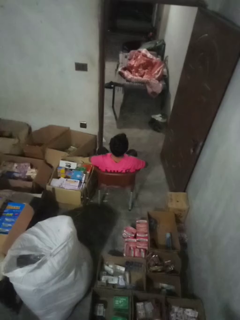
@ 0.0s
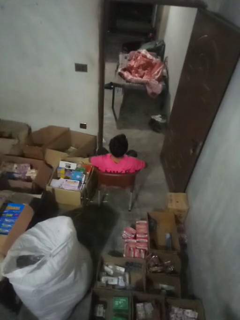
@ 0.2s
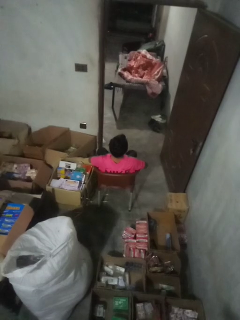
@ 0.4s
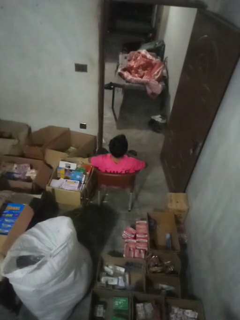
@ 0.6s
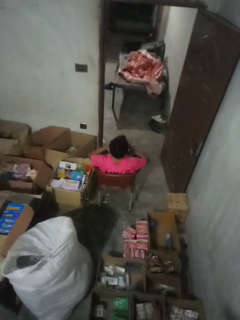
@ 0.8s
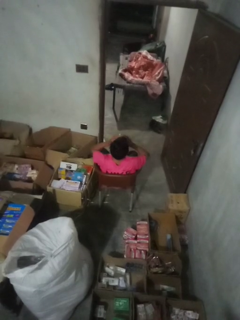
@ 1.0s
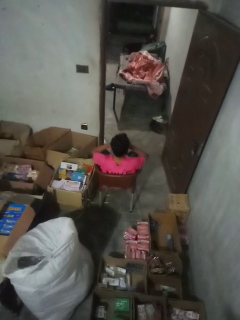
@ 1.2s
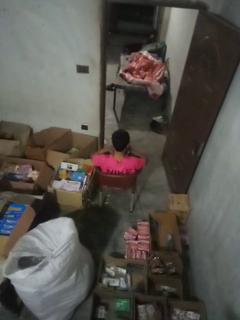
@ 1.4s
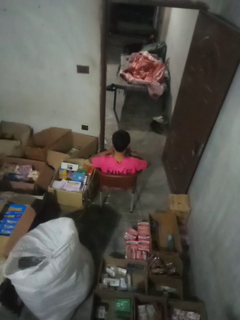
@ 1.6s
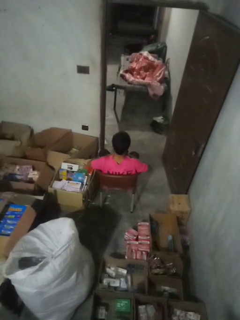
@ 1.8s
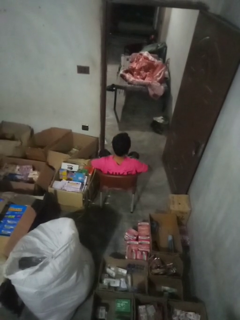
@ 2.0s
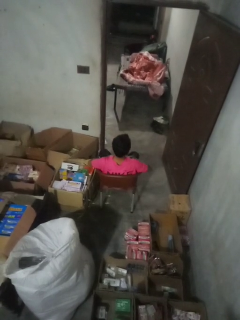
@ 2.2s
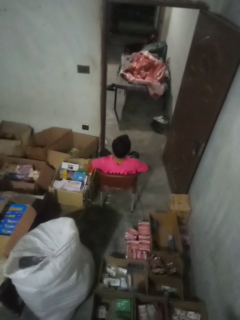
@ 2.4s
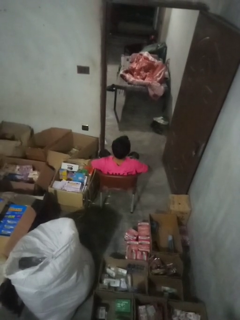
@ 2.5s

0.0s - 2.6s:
person sneezes into hand

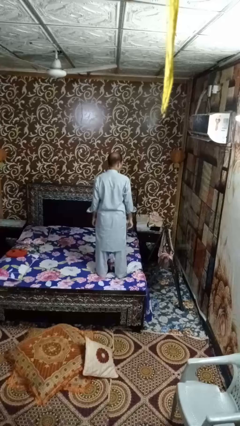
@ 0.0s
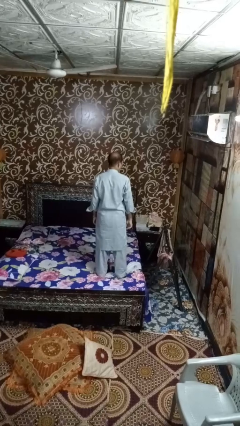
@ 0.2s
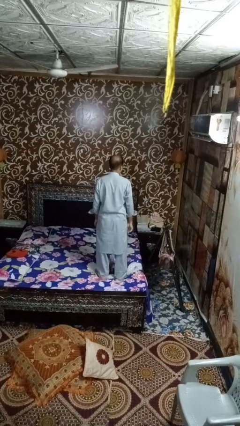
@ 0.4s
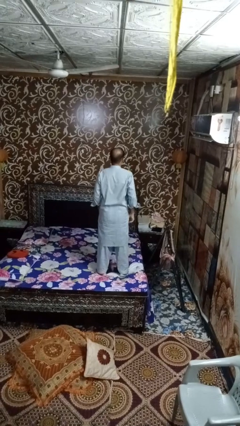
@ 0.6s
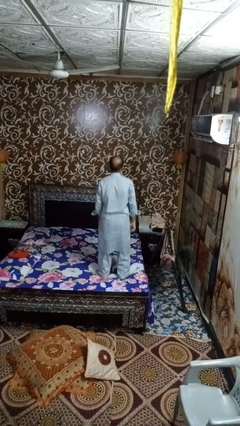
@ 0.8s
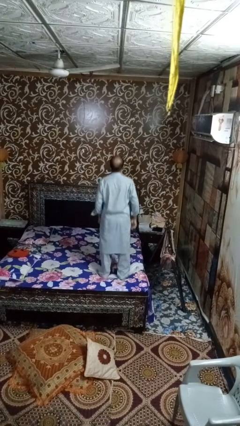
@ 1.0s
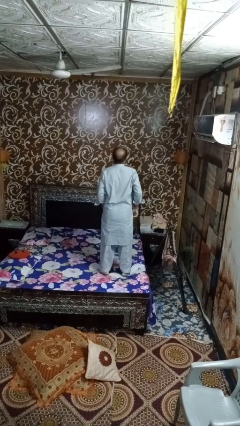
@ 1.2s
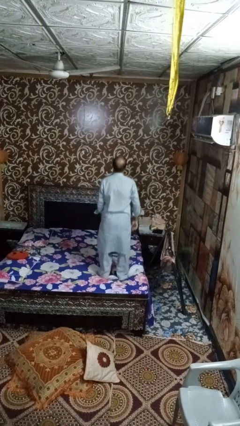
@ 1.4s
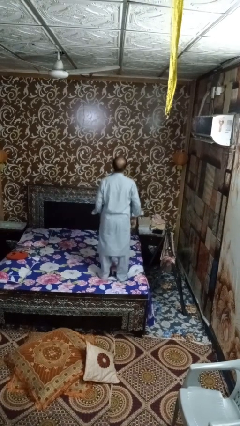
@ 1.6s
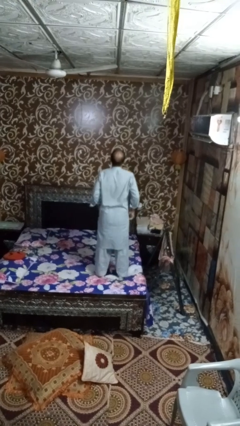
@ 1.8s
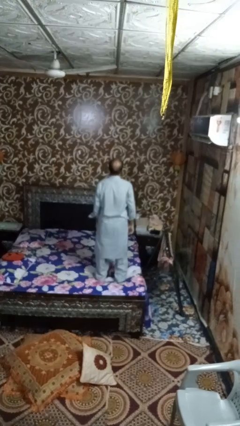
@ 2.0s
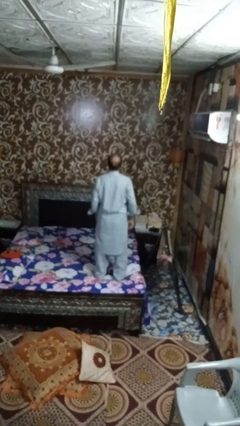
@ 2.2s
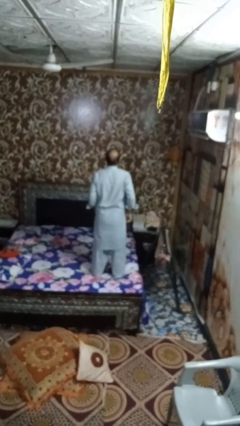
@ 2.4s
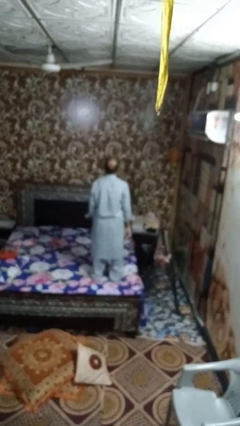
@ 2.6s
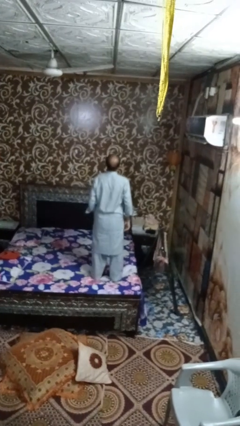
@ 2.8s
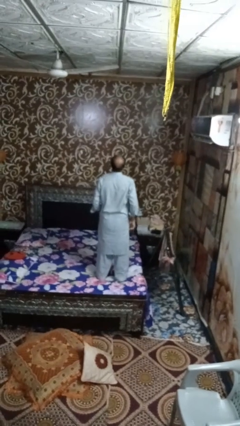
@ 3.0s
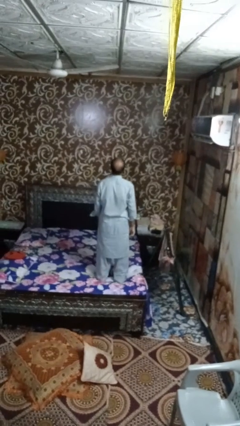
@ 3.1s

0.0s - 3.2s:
person jumps on bed

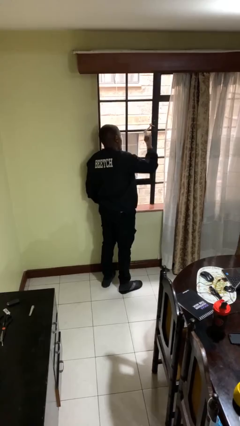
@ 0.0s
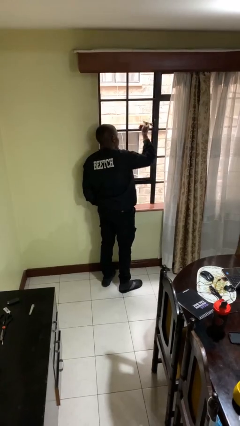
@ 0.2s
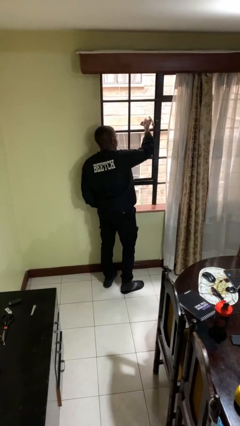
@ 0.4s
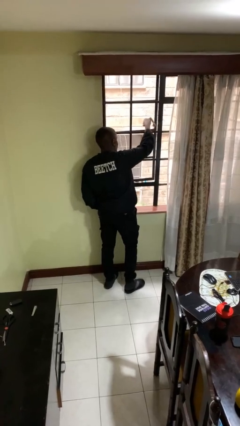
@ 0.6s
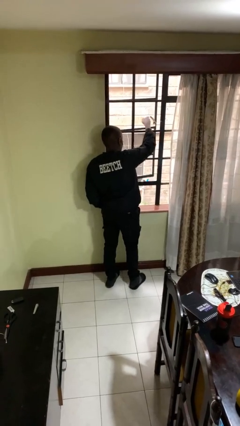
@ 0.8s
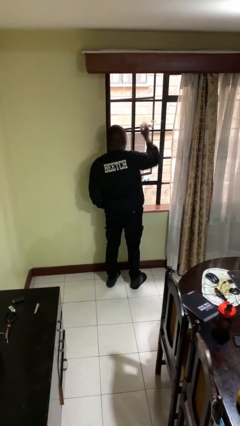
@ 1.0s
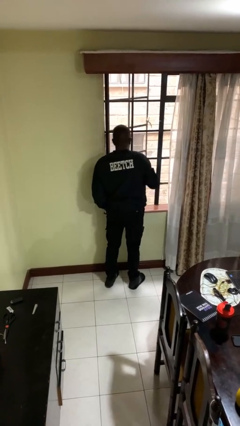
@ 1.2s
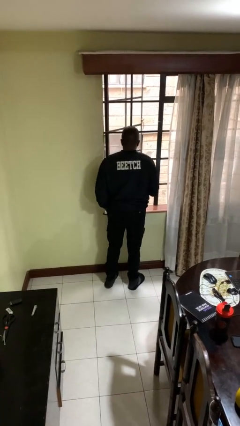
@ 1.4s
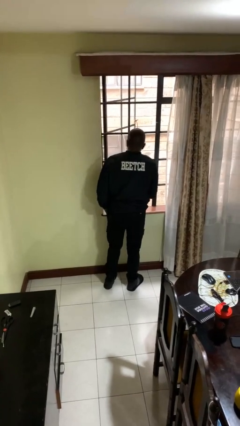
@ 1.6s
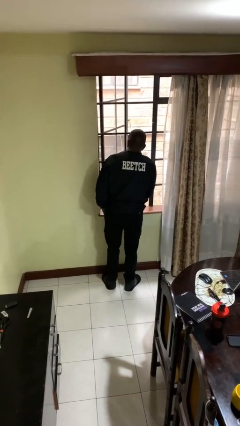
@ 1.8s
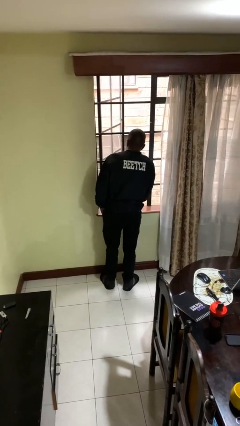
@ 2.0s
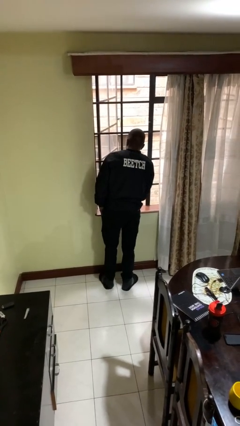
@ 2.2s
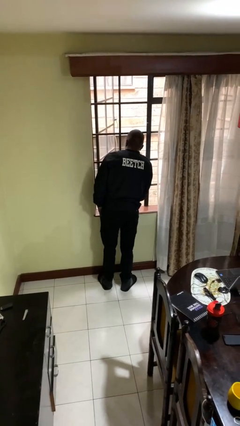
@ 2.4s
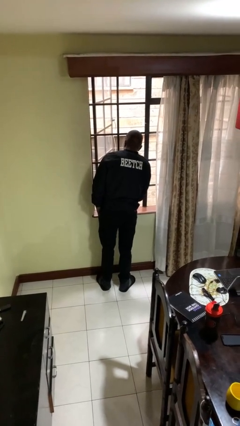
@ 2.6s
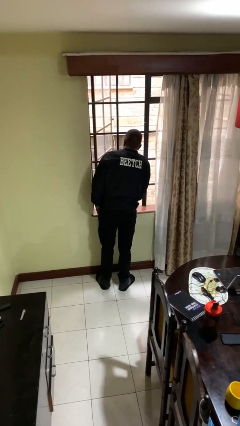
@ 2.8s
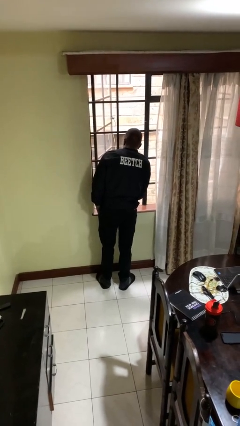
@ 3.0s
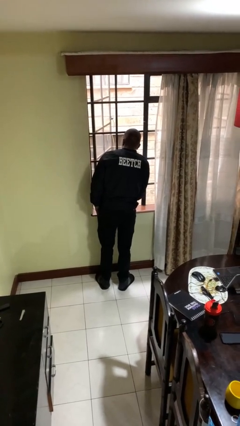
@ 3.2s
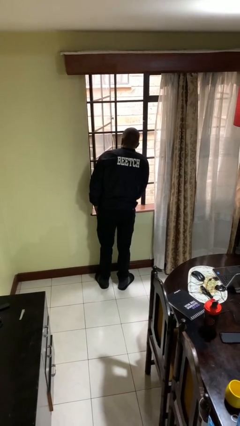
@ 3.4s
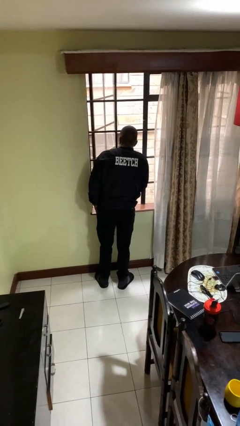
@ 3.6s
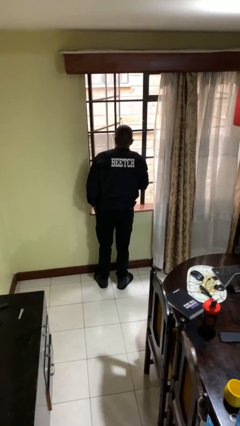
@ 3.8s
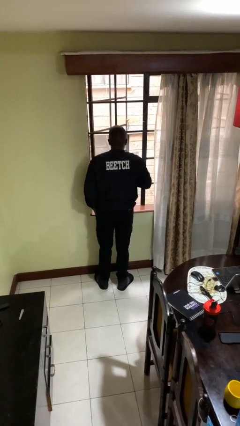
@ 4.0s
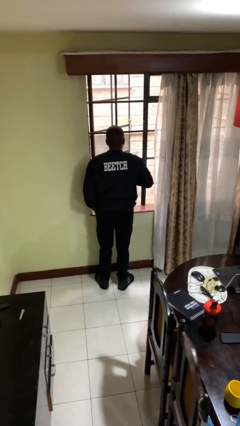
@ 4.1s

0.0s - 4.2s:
person opens home window

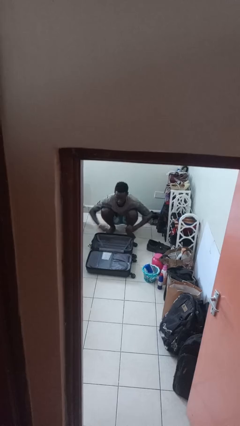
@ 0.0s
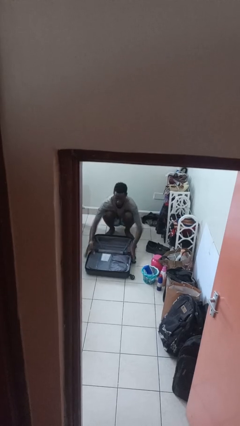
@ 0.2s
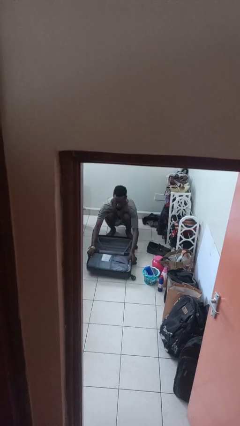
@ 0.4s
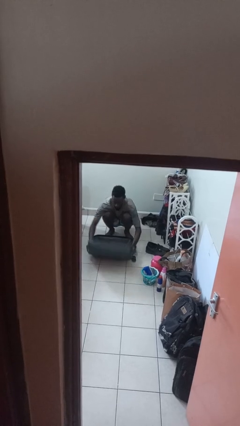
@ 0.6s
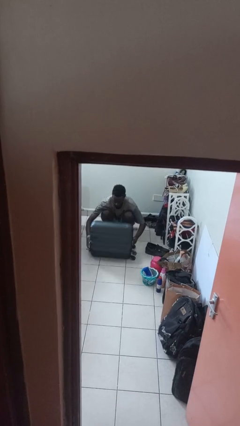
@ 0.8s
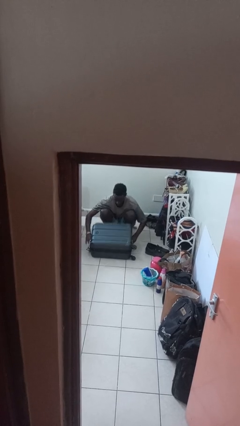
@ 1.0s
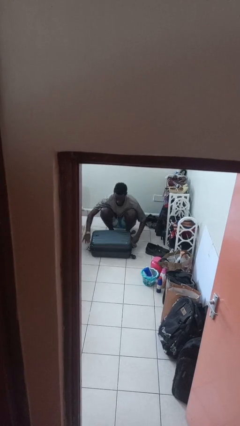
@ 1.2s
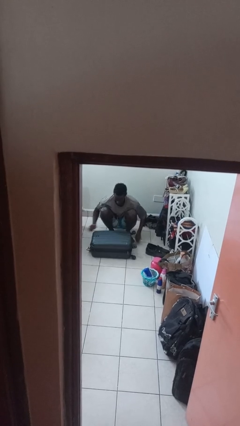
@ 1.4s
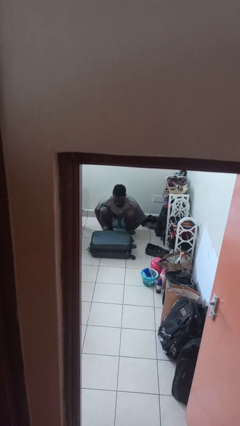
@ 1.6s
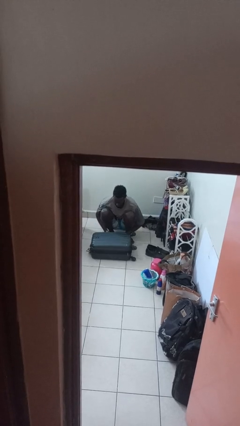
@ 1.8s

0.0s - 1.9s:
person closes suitcase

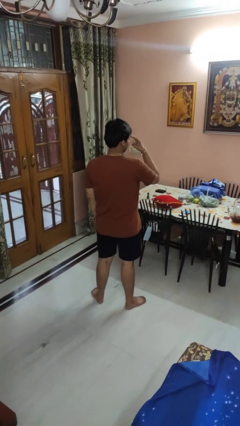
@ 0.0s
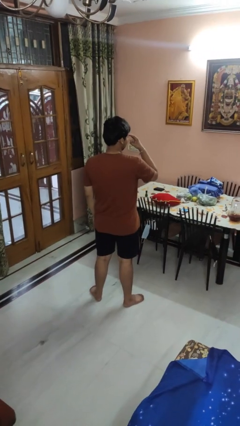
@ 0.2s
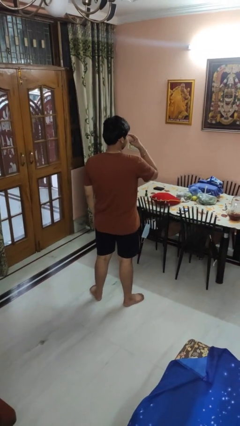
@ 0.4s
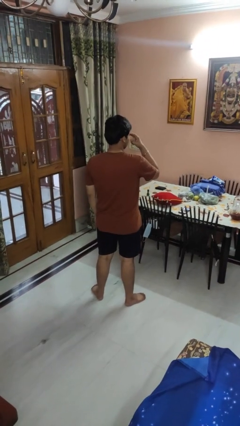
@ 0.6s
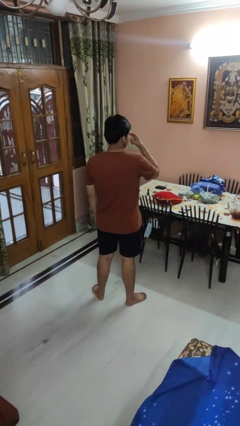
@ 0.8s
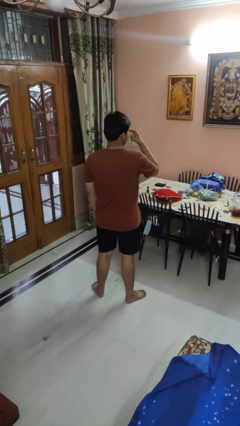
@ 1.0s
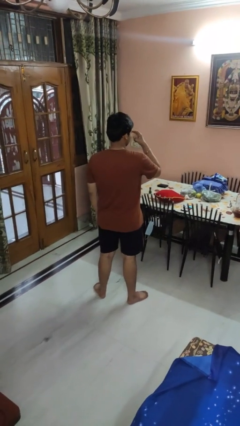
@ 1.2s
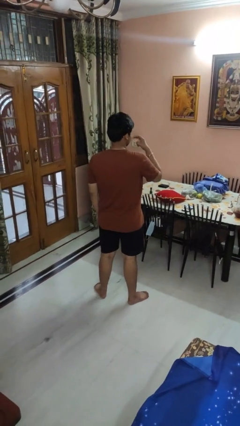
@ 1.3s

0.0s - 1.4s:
person gestures watch closely

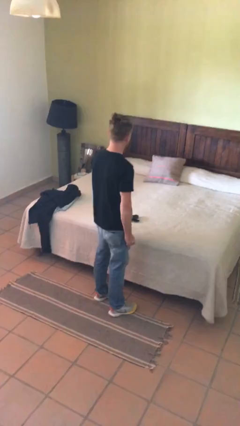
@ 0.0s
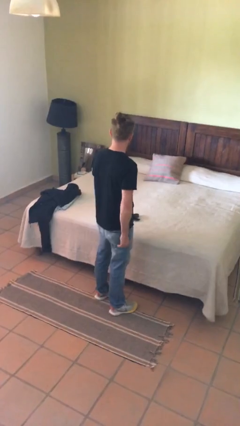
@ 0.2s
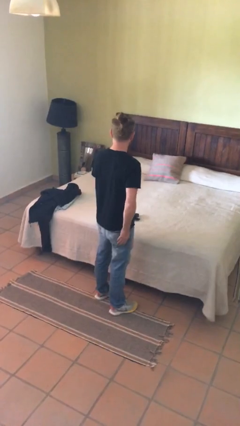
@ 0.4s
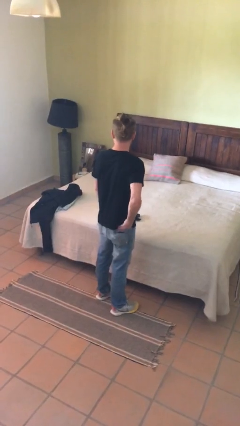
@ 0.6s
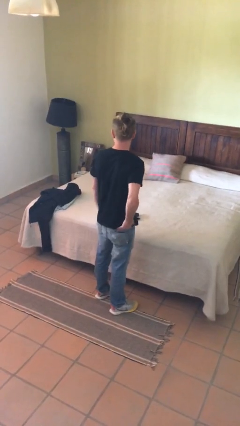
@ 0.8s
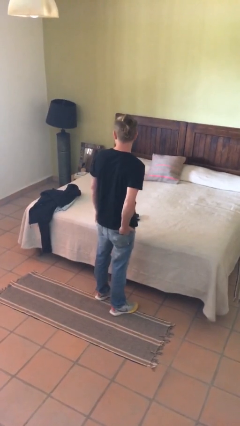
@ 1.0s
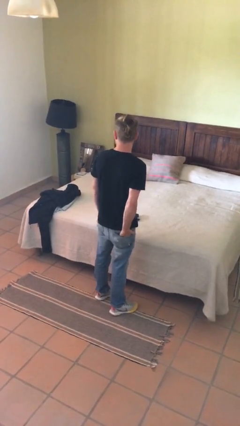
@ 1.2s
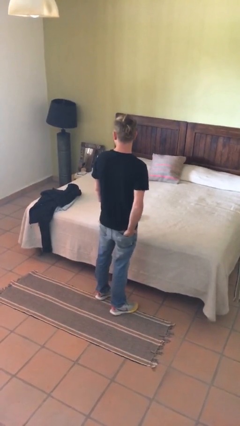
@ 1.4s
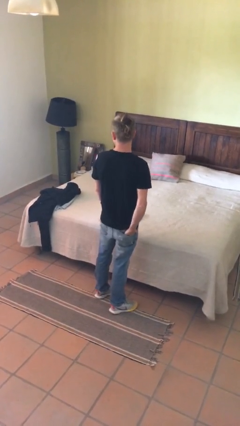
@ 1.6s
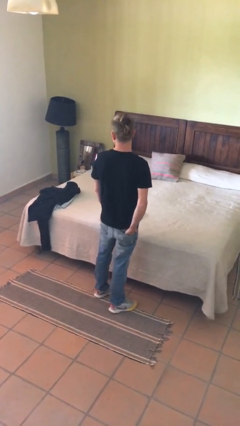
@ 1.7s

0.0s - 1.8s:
person puts hands in back pockets

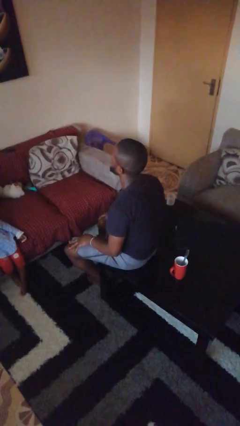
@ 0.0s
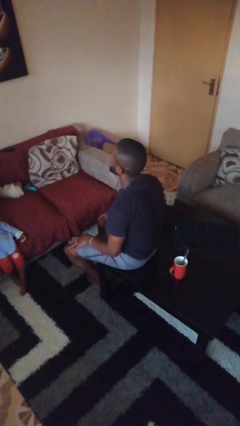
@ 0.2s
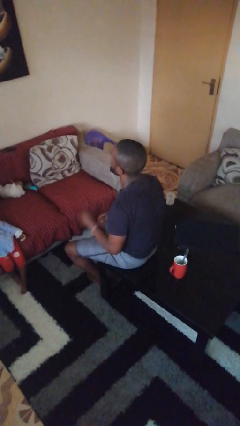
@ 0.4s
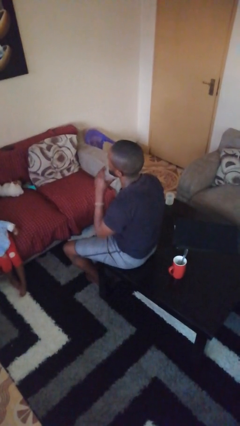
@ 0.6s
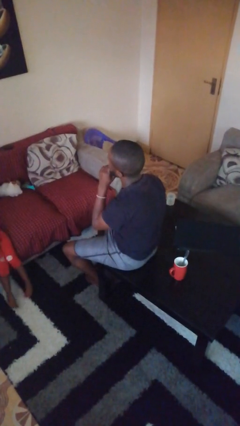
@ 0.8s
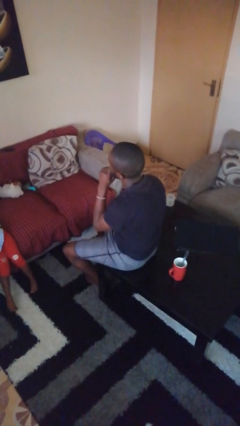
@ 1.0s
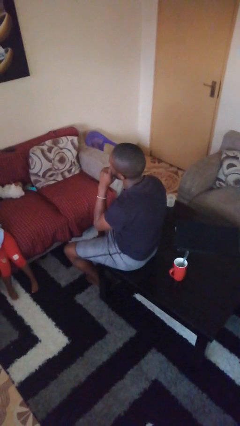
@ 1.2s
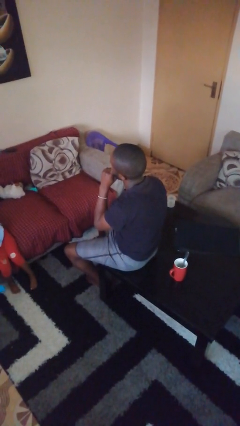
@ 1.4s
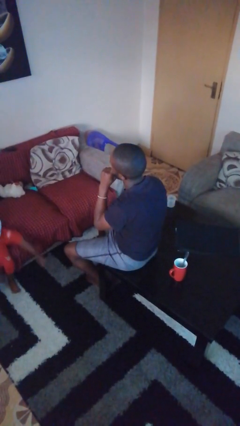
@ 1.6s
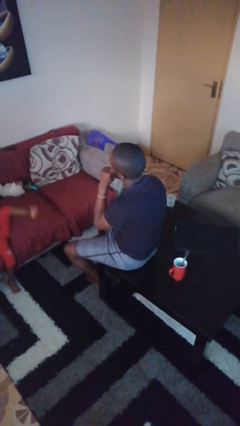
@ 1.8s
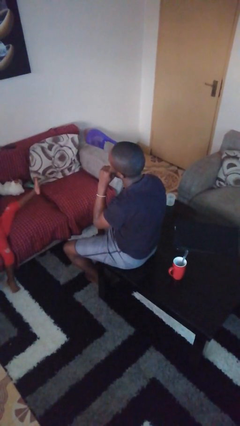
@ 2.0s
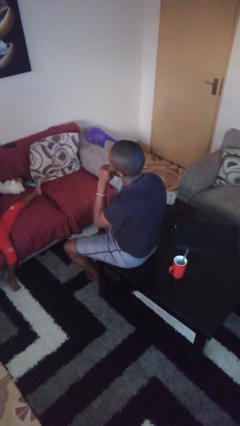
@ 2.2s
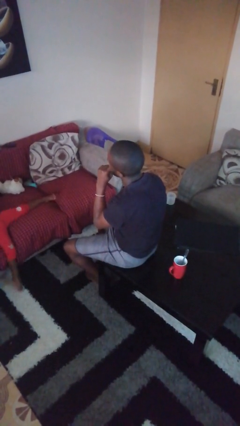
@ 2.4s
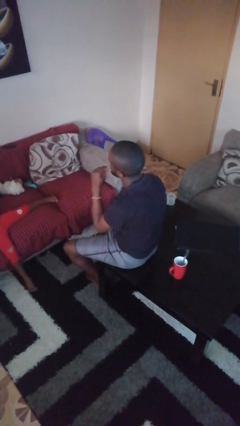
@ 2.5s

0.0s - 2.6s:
person strokes chin

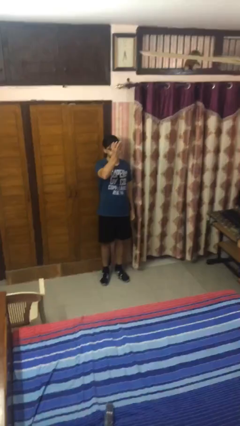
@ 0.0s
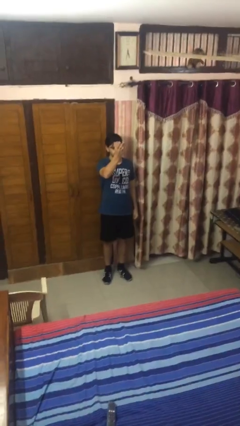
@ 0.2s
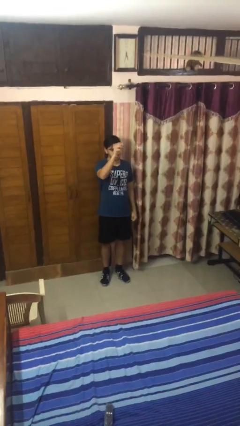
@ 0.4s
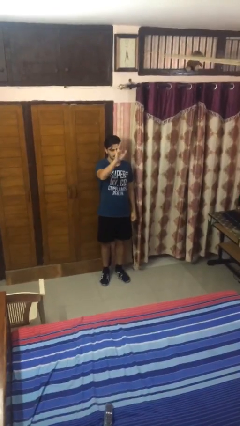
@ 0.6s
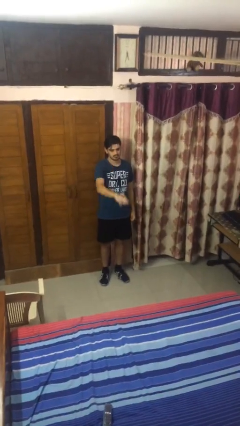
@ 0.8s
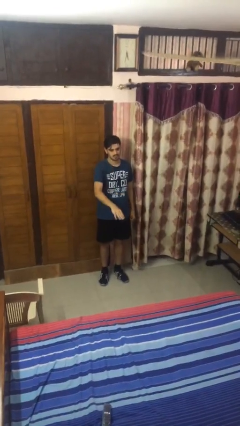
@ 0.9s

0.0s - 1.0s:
person gestures swipe down
